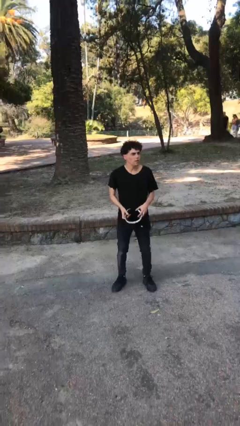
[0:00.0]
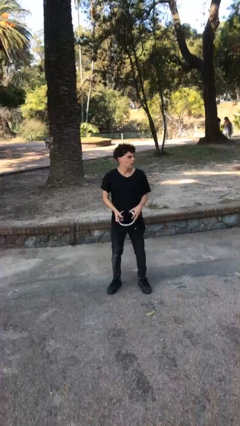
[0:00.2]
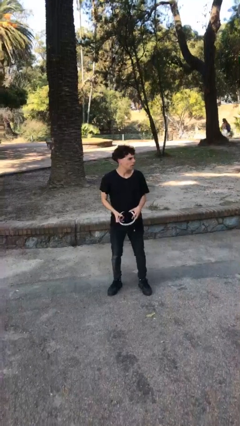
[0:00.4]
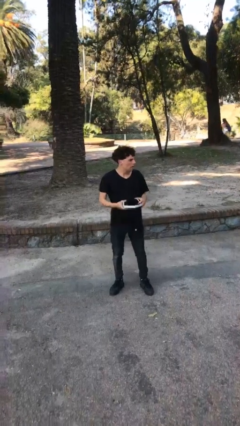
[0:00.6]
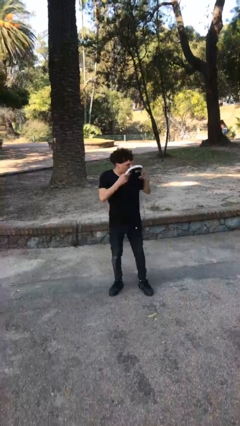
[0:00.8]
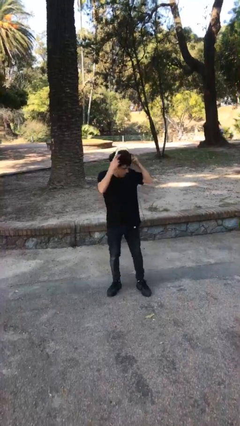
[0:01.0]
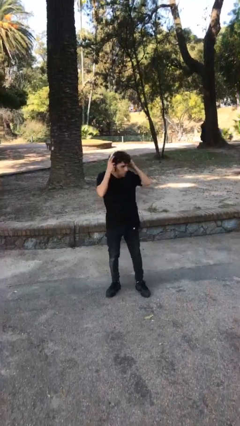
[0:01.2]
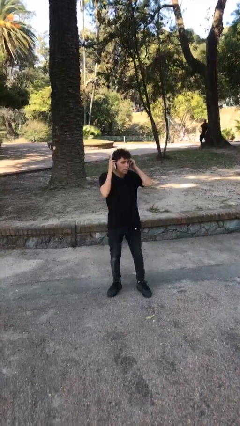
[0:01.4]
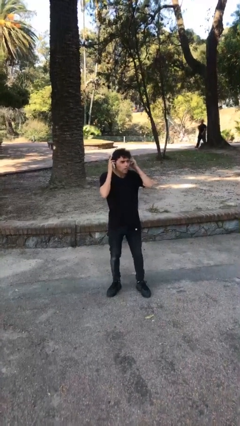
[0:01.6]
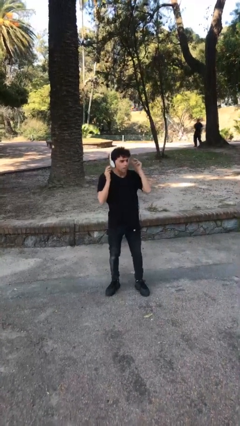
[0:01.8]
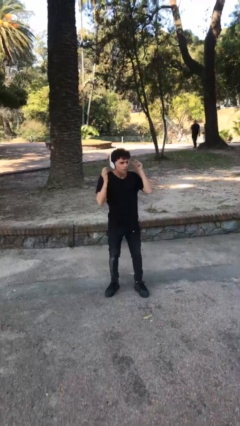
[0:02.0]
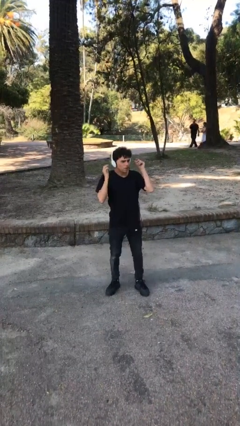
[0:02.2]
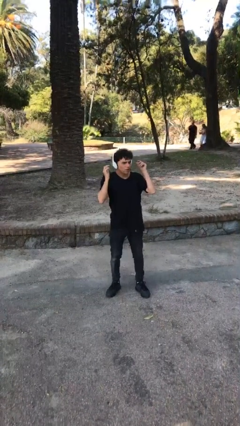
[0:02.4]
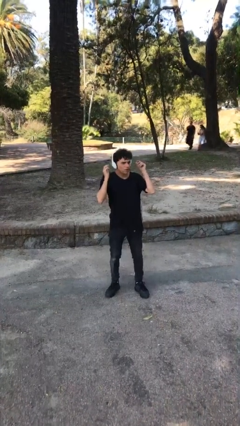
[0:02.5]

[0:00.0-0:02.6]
person puts on headphones

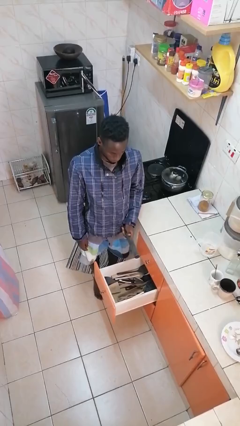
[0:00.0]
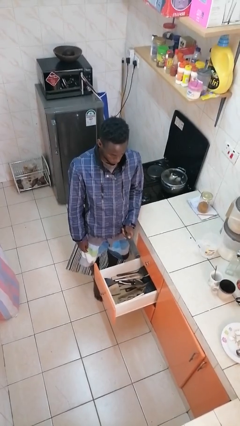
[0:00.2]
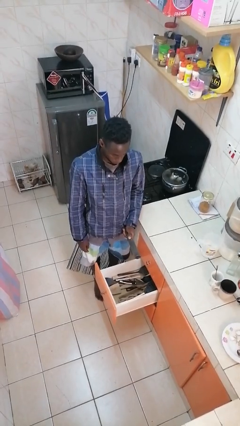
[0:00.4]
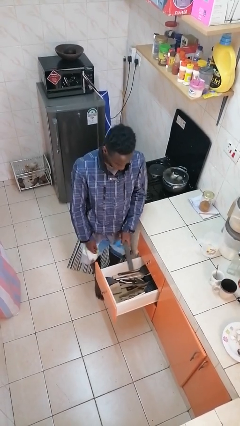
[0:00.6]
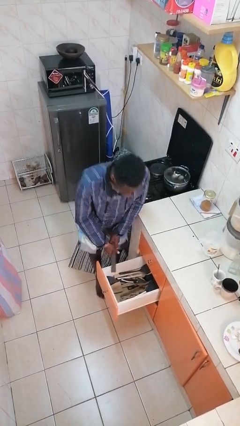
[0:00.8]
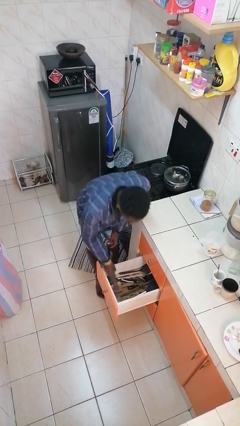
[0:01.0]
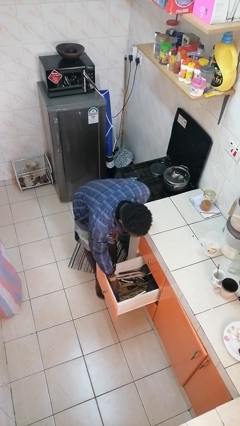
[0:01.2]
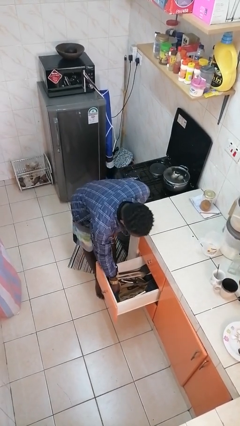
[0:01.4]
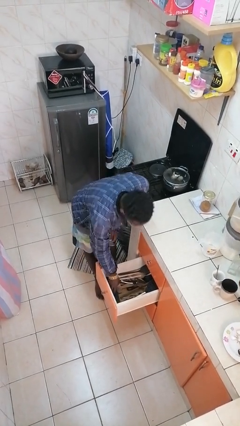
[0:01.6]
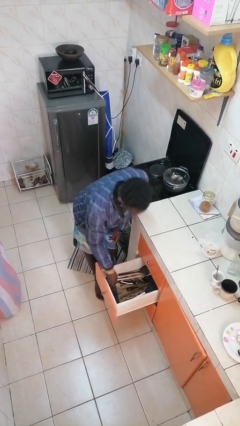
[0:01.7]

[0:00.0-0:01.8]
person puts object into kitchen drawer

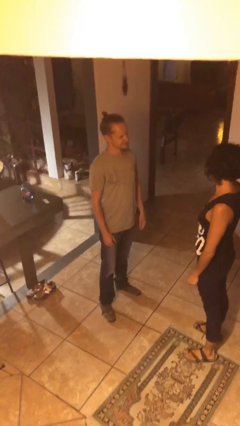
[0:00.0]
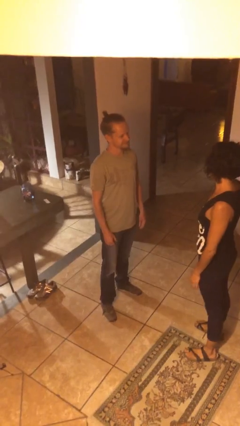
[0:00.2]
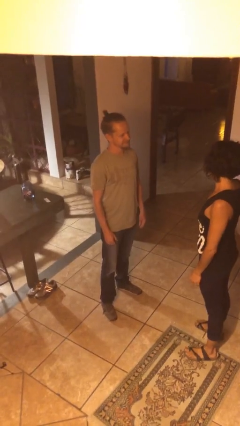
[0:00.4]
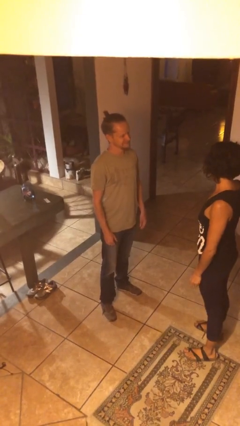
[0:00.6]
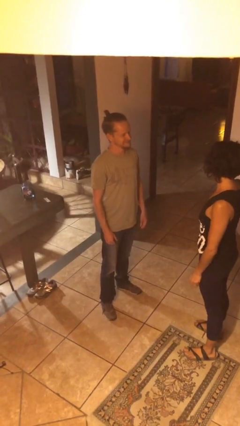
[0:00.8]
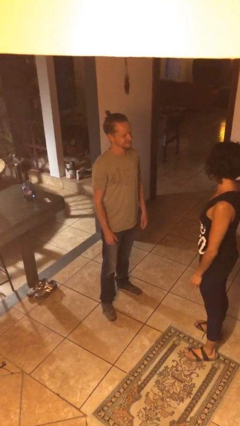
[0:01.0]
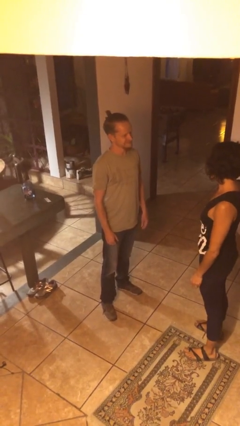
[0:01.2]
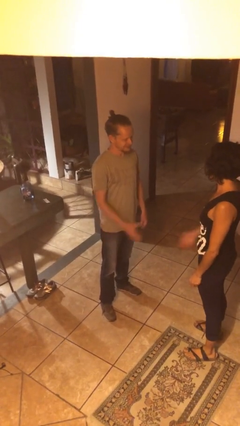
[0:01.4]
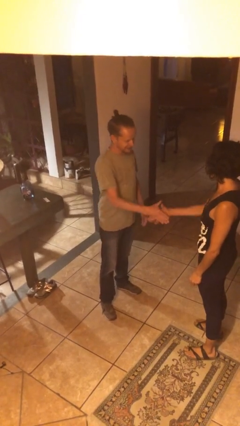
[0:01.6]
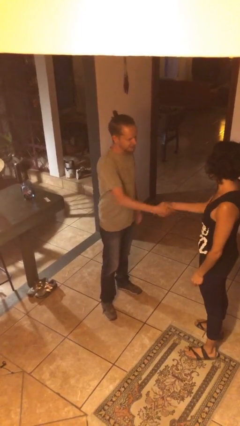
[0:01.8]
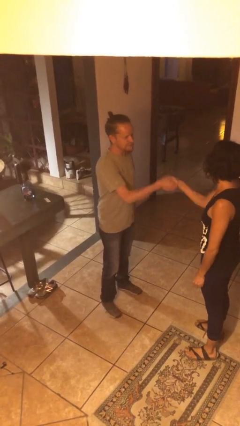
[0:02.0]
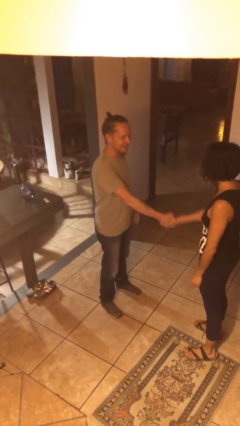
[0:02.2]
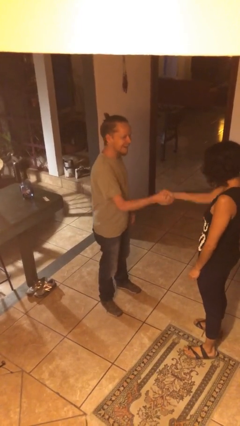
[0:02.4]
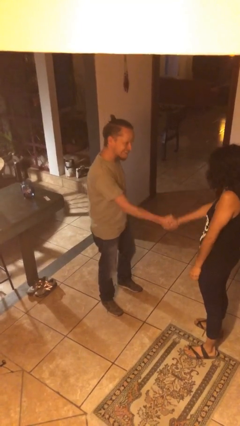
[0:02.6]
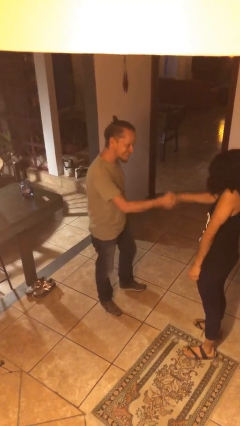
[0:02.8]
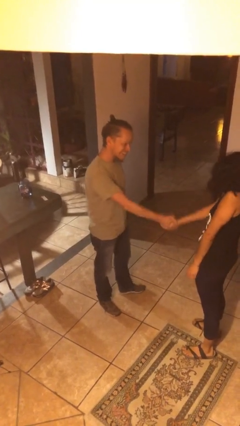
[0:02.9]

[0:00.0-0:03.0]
person shakes hand

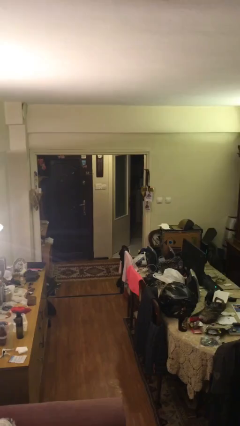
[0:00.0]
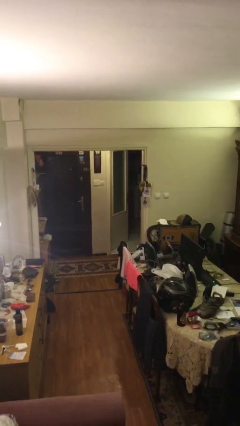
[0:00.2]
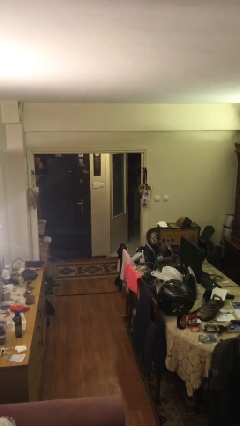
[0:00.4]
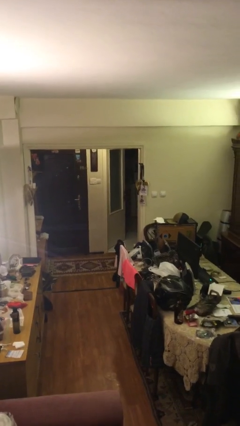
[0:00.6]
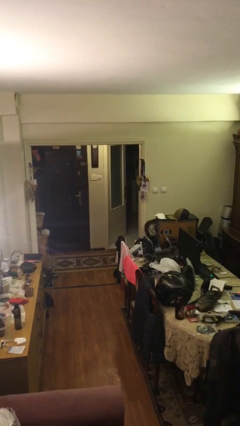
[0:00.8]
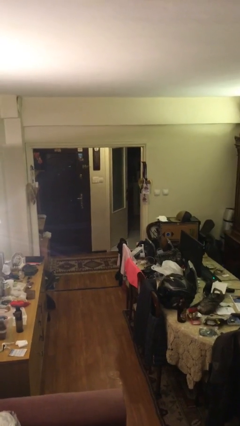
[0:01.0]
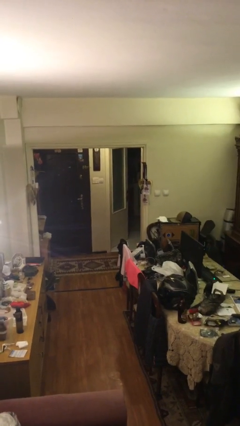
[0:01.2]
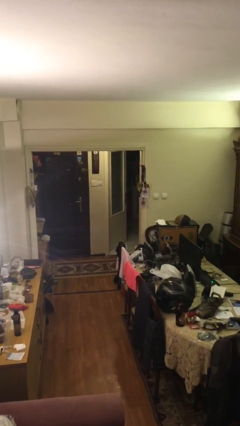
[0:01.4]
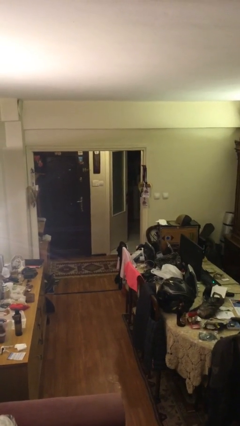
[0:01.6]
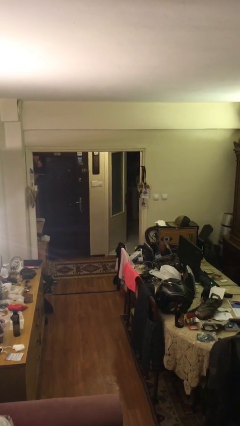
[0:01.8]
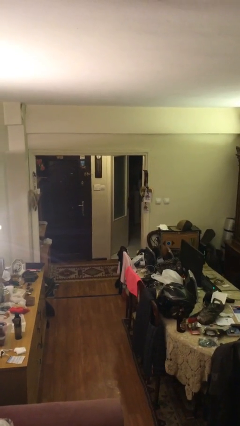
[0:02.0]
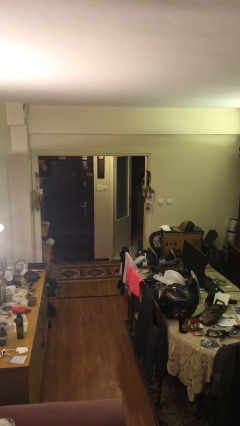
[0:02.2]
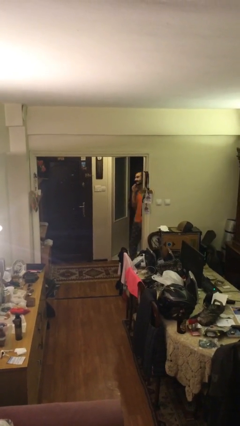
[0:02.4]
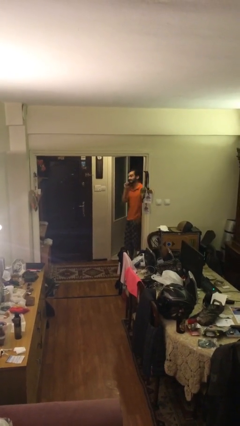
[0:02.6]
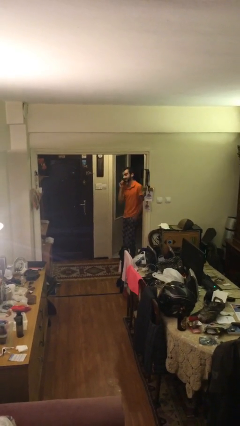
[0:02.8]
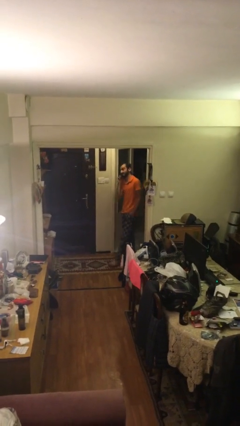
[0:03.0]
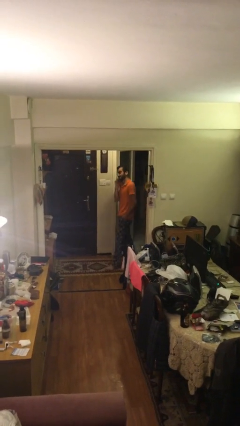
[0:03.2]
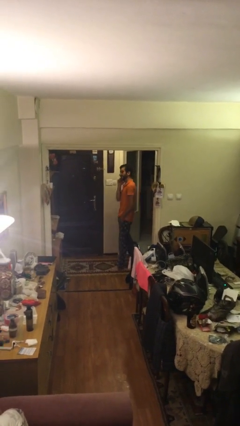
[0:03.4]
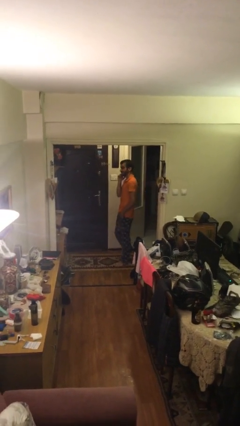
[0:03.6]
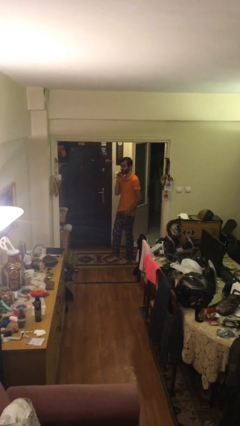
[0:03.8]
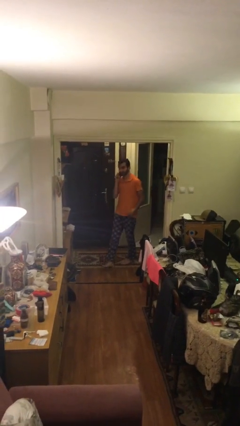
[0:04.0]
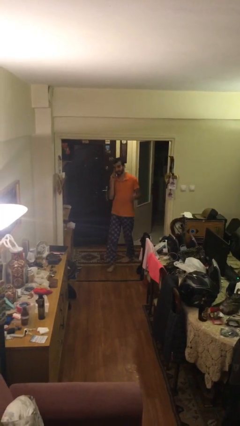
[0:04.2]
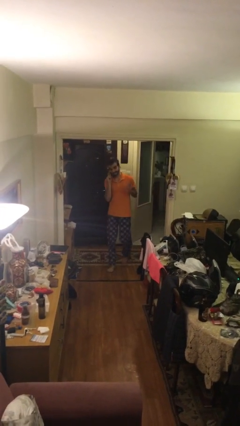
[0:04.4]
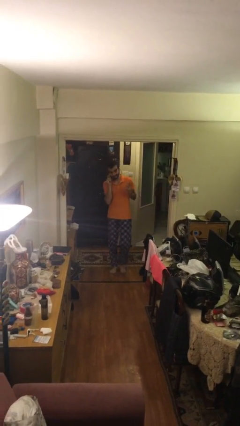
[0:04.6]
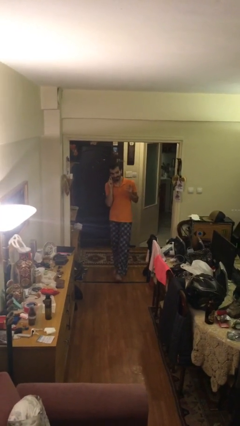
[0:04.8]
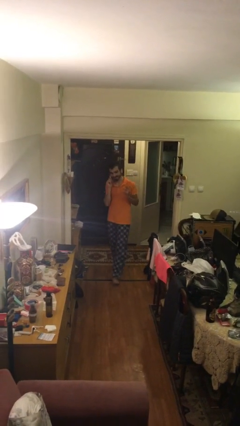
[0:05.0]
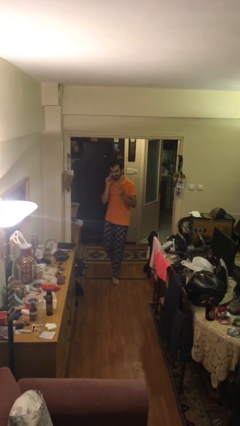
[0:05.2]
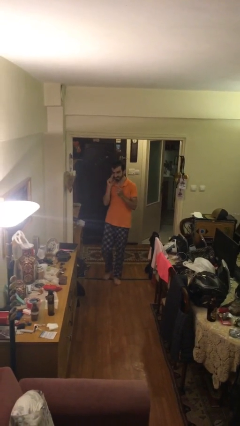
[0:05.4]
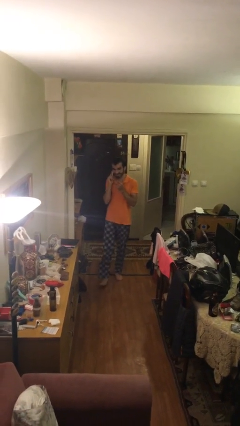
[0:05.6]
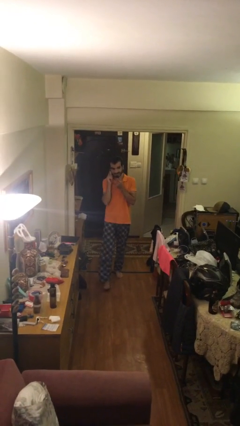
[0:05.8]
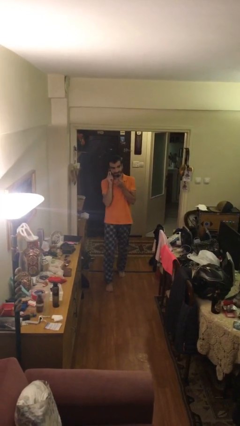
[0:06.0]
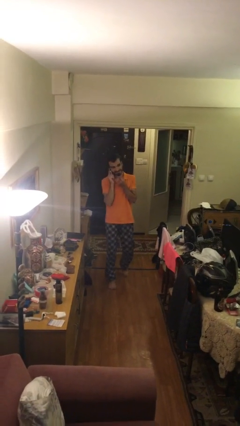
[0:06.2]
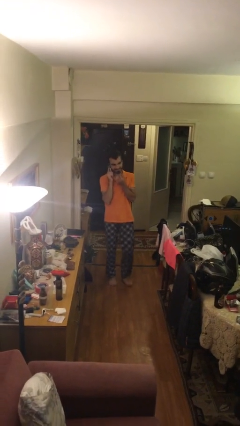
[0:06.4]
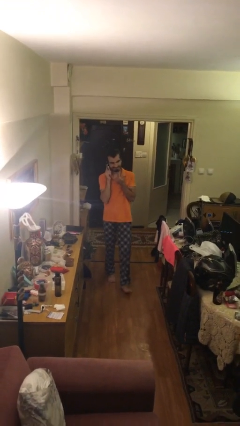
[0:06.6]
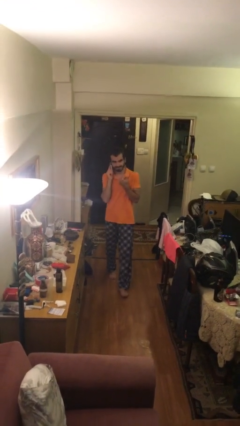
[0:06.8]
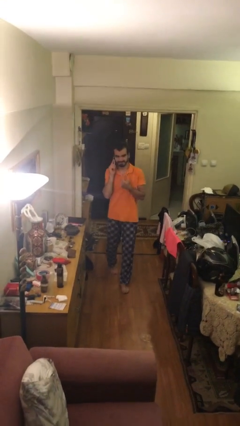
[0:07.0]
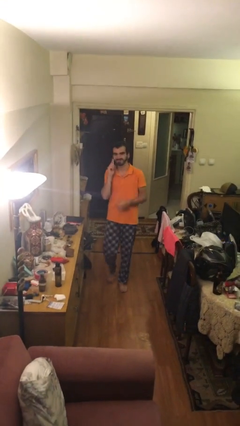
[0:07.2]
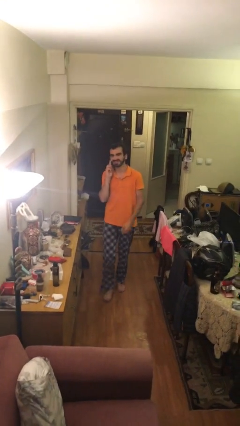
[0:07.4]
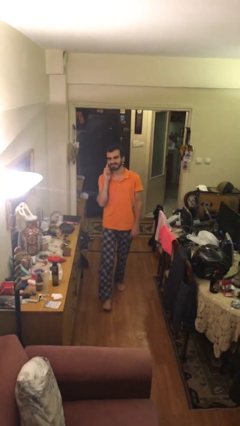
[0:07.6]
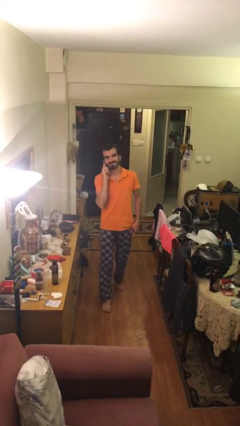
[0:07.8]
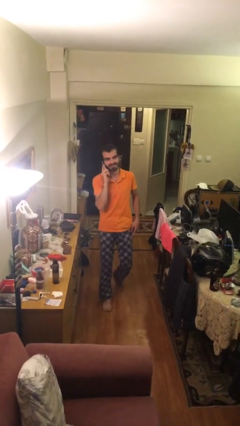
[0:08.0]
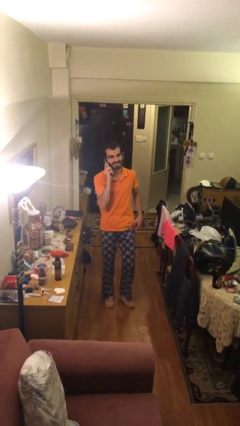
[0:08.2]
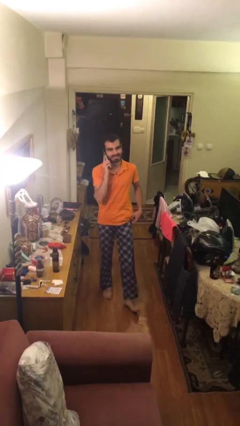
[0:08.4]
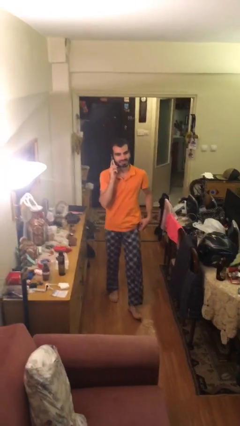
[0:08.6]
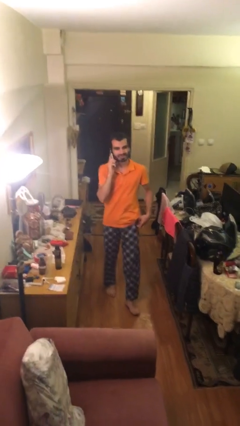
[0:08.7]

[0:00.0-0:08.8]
person enters scene through structure

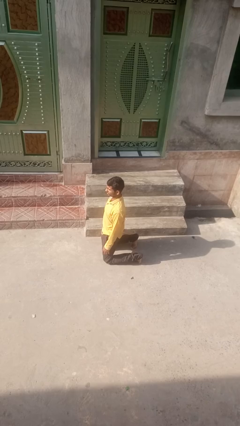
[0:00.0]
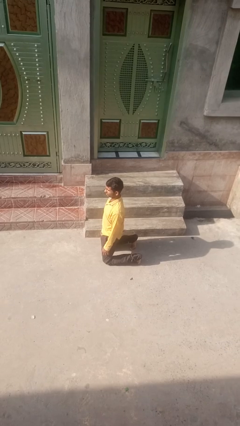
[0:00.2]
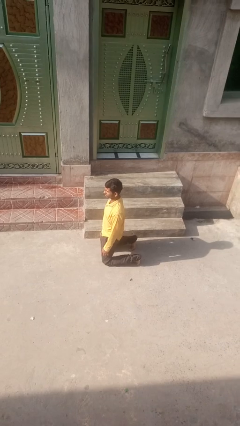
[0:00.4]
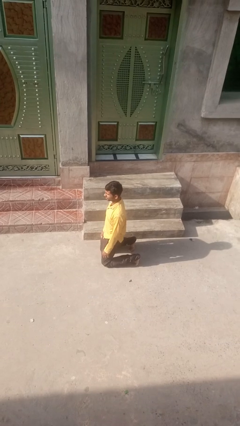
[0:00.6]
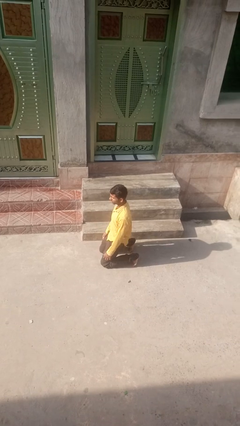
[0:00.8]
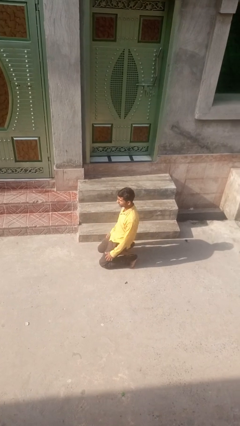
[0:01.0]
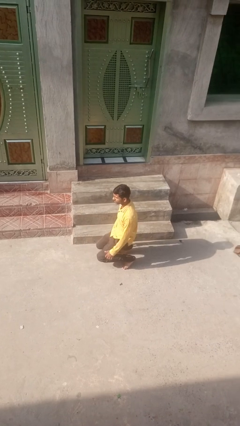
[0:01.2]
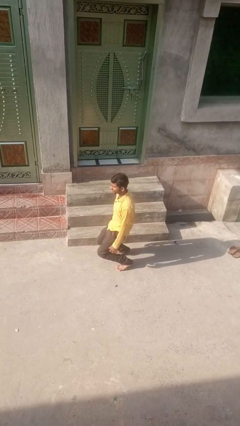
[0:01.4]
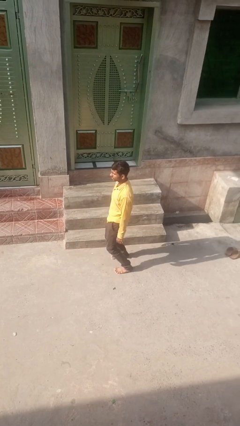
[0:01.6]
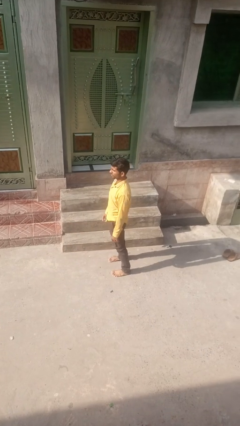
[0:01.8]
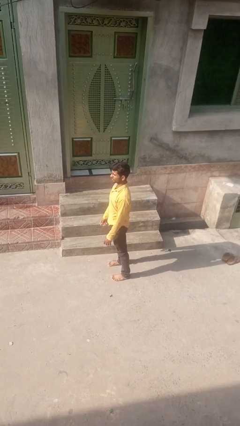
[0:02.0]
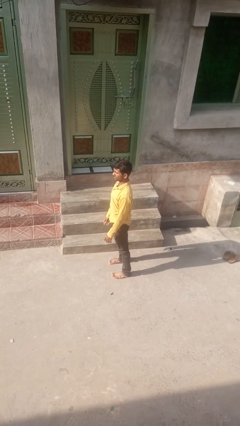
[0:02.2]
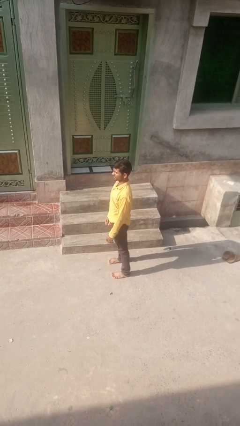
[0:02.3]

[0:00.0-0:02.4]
person stands up from floor
